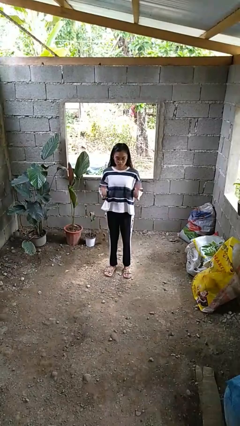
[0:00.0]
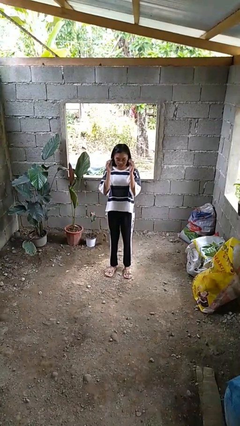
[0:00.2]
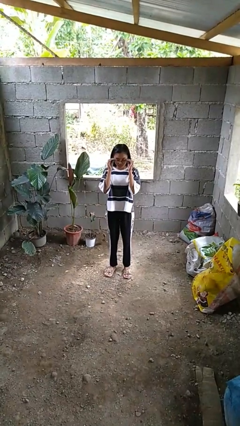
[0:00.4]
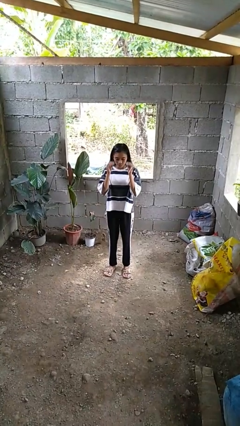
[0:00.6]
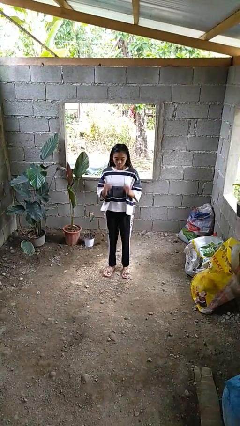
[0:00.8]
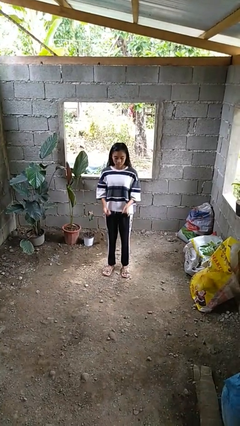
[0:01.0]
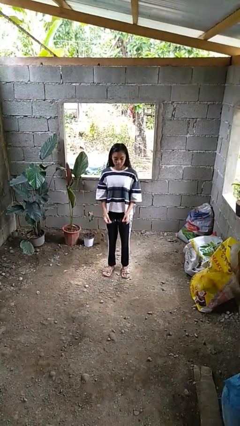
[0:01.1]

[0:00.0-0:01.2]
person takes off glasses

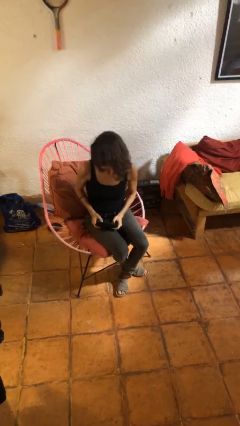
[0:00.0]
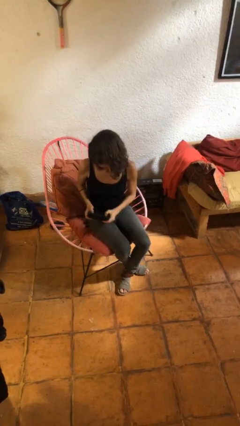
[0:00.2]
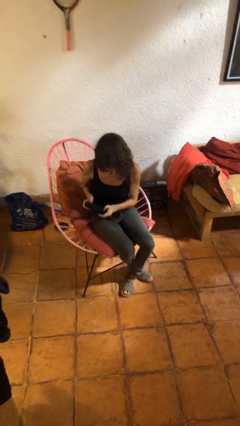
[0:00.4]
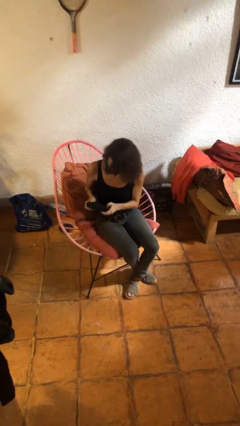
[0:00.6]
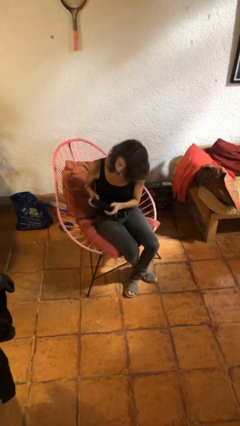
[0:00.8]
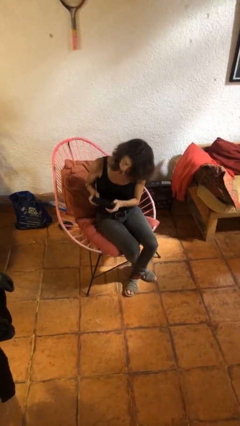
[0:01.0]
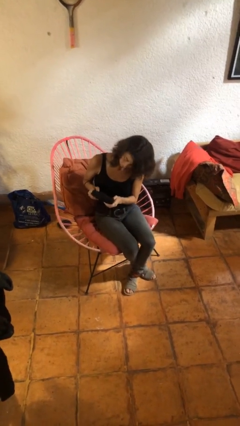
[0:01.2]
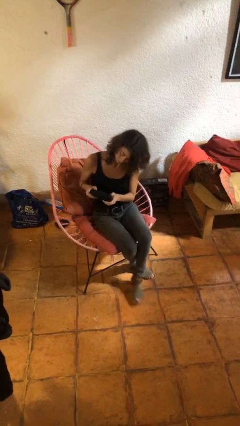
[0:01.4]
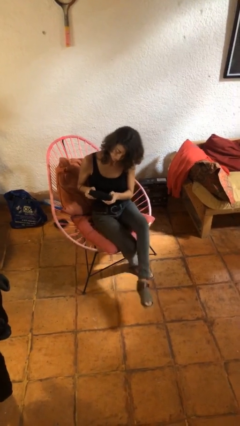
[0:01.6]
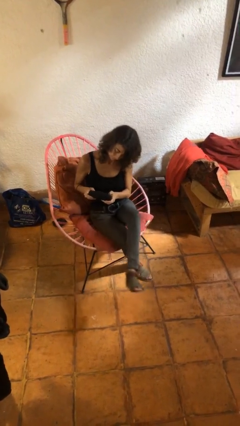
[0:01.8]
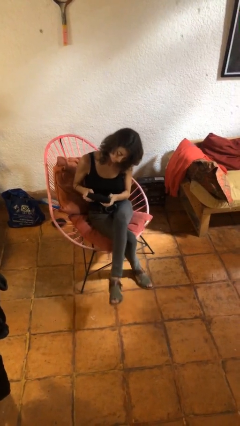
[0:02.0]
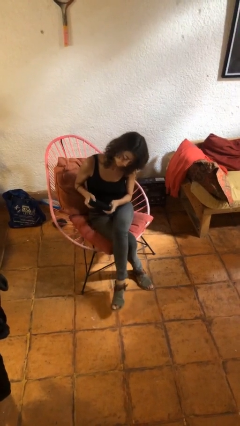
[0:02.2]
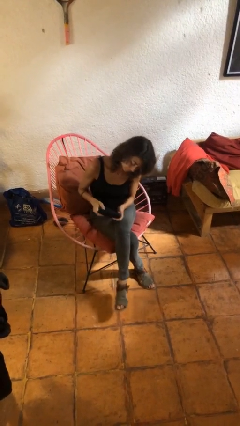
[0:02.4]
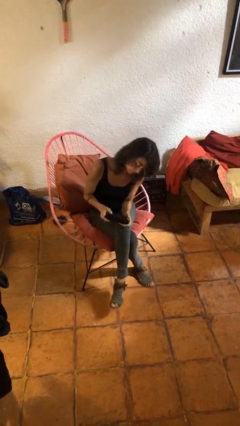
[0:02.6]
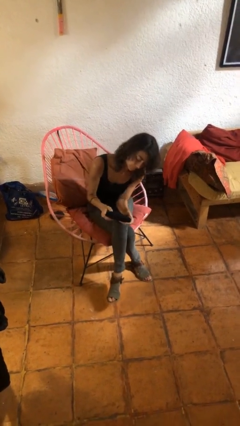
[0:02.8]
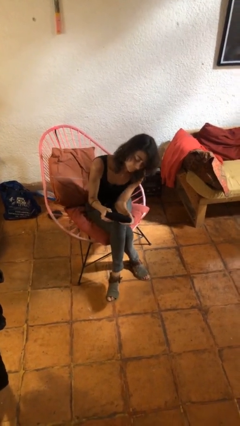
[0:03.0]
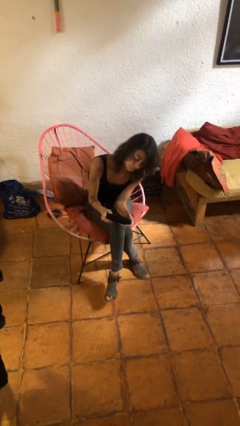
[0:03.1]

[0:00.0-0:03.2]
person interacts with handheld game

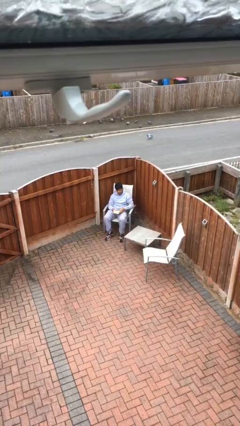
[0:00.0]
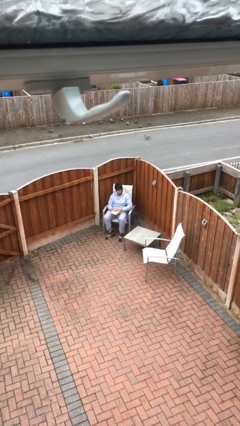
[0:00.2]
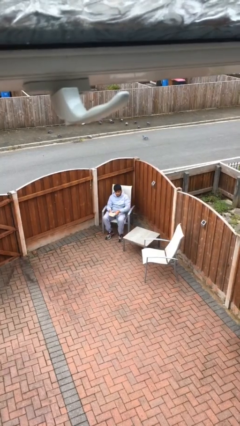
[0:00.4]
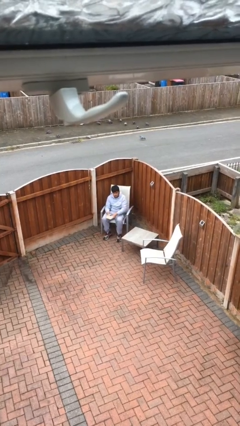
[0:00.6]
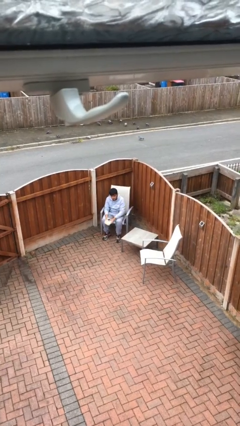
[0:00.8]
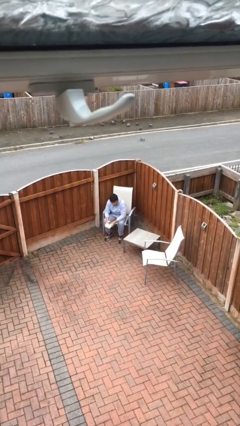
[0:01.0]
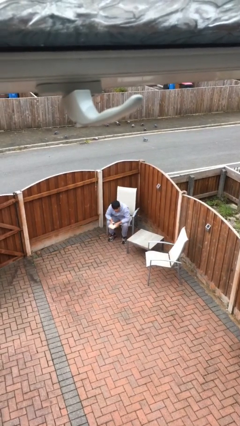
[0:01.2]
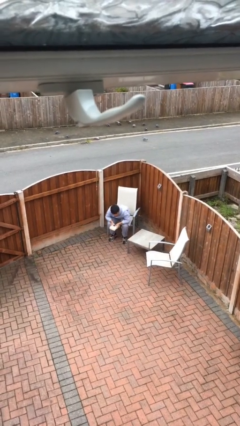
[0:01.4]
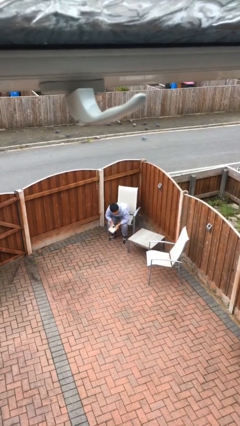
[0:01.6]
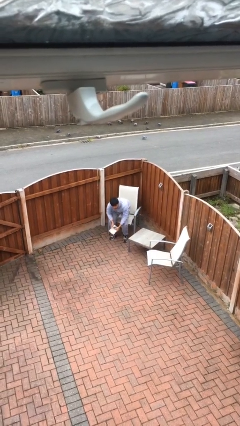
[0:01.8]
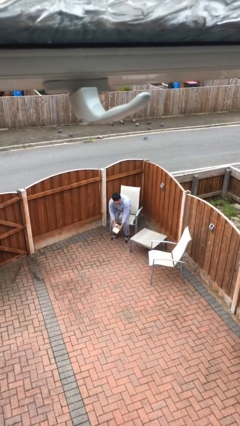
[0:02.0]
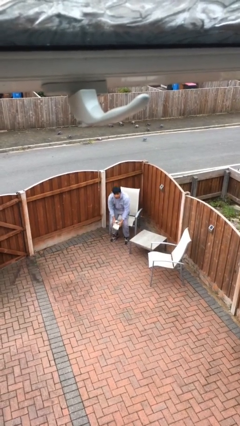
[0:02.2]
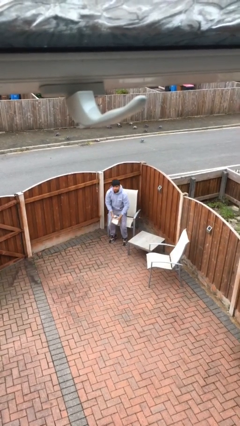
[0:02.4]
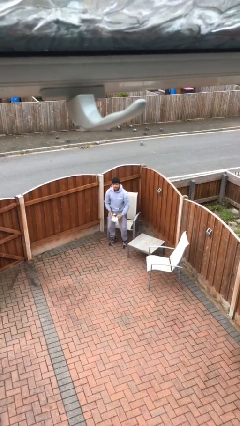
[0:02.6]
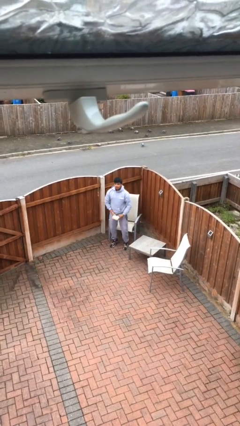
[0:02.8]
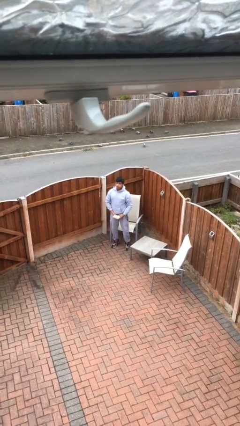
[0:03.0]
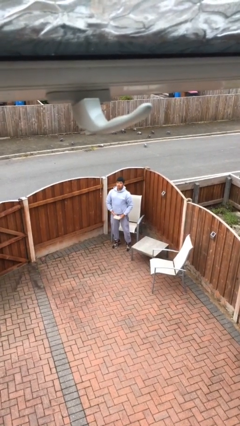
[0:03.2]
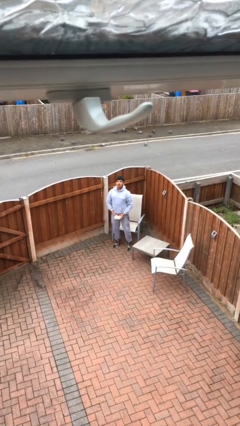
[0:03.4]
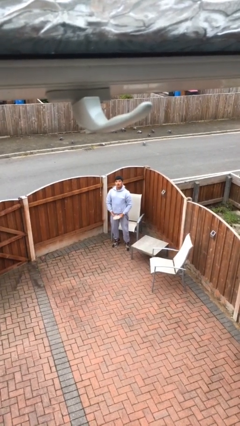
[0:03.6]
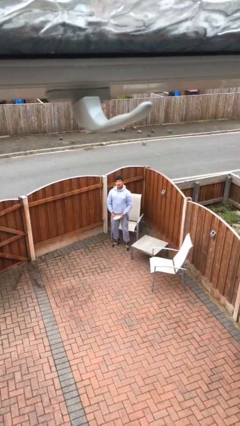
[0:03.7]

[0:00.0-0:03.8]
person stands up

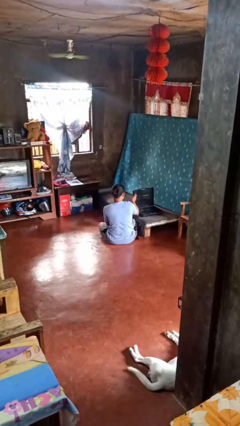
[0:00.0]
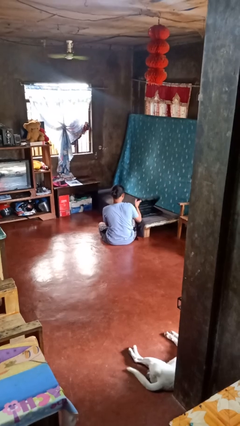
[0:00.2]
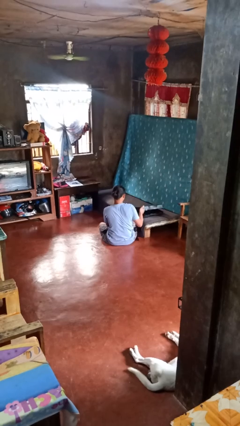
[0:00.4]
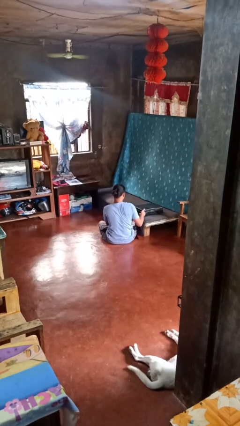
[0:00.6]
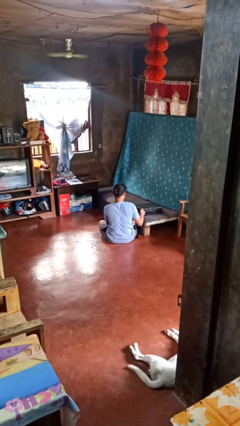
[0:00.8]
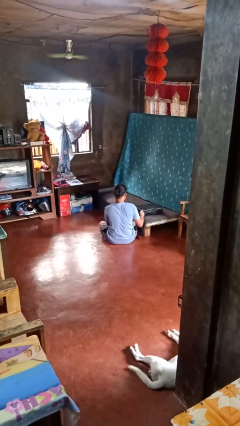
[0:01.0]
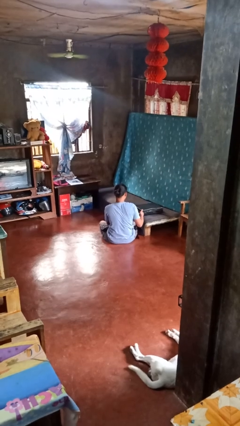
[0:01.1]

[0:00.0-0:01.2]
person closes suitcase

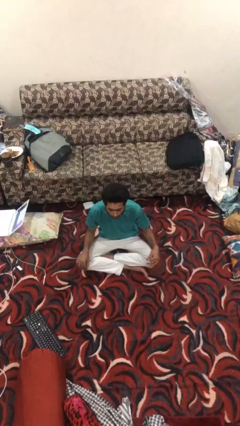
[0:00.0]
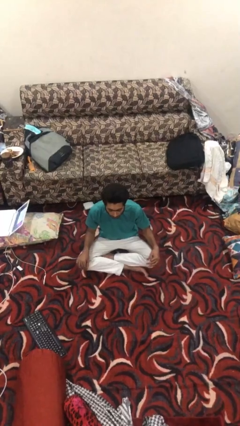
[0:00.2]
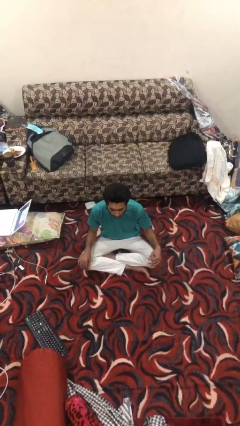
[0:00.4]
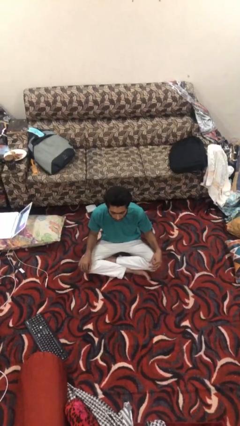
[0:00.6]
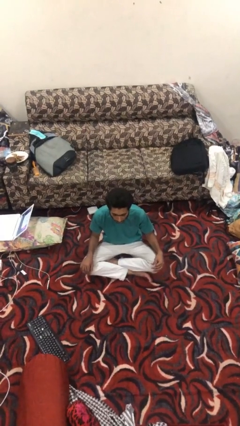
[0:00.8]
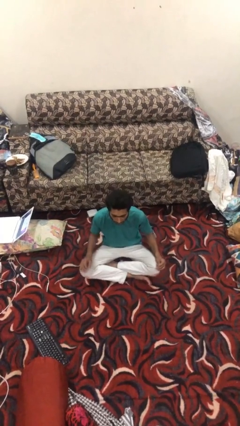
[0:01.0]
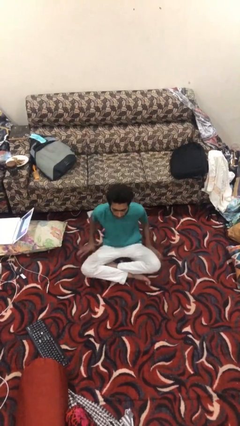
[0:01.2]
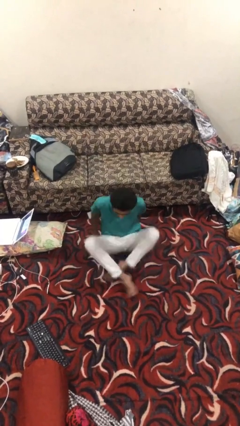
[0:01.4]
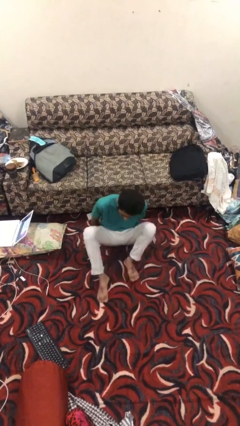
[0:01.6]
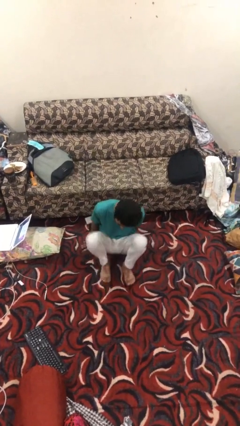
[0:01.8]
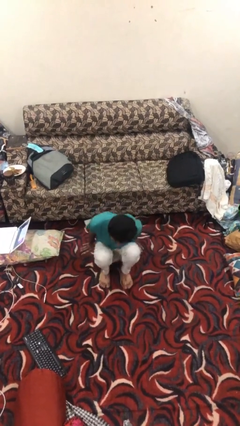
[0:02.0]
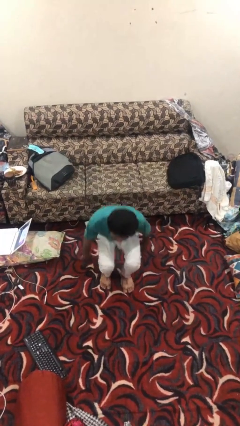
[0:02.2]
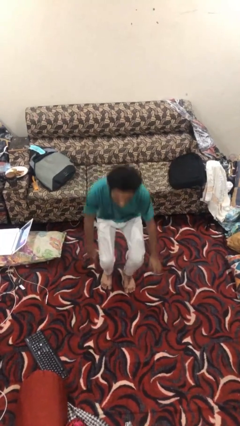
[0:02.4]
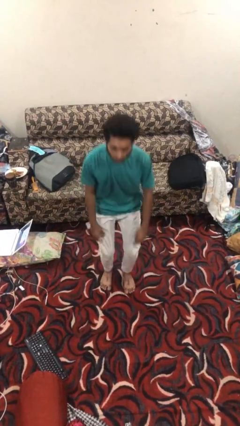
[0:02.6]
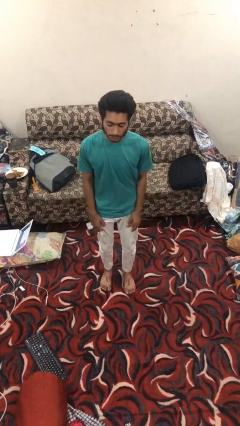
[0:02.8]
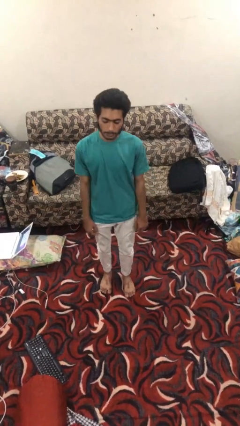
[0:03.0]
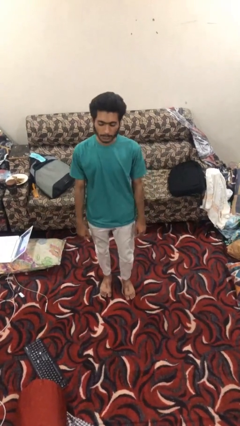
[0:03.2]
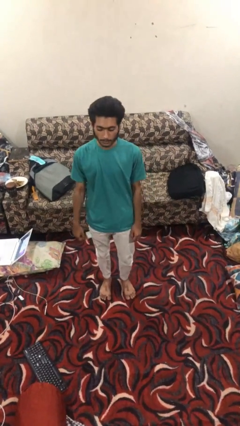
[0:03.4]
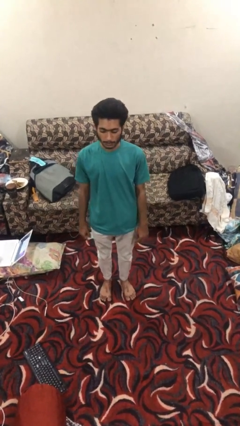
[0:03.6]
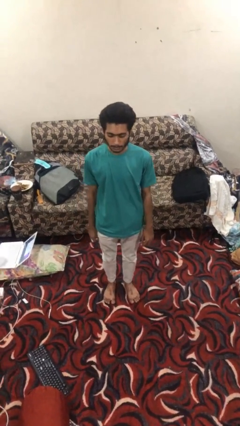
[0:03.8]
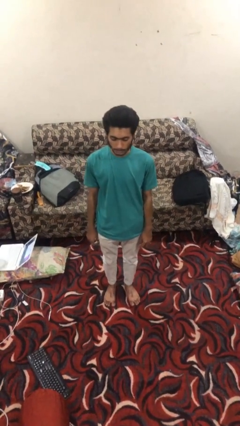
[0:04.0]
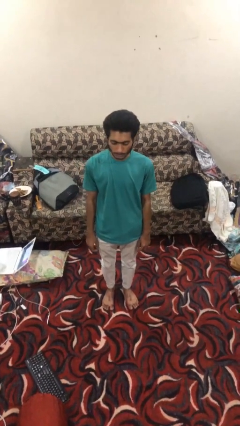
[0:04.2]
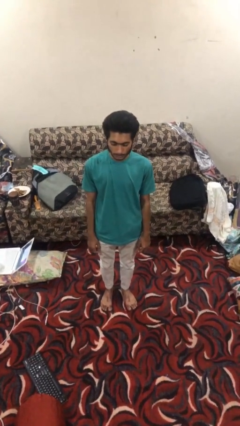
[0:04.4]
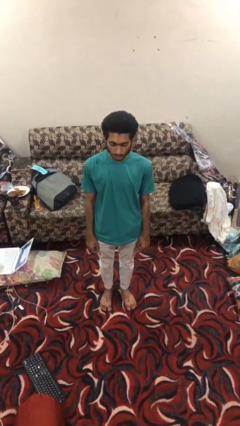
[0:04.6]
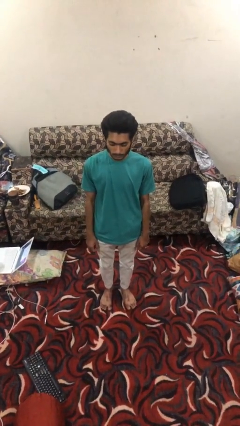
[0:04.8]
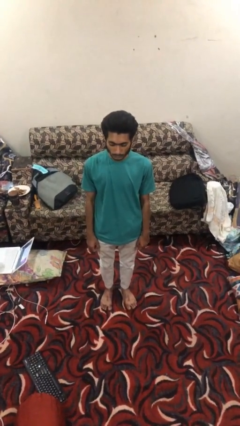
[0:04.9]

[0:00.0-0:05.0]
person stands up from floor

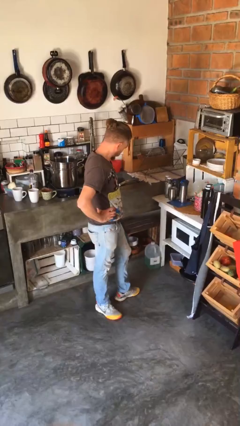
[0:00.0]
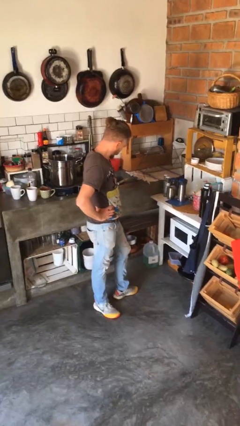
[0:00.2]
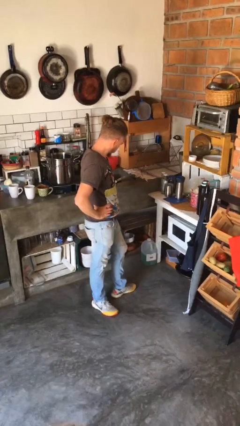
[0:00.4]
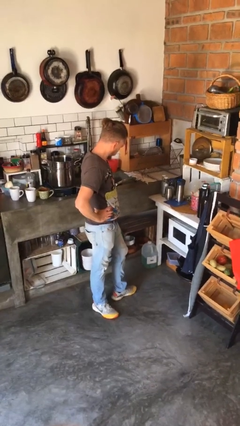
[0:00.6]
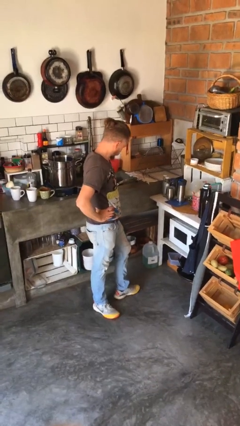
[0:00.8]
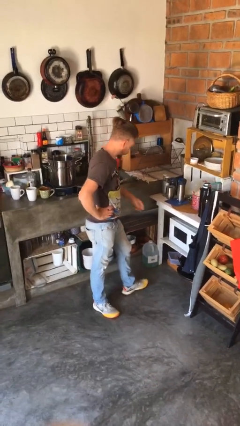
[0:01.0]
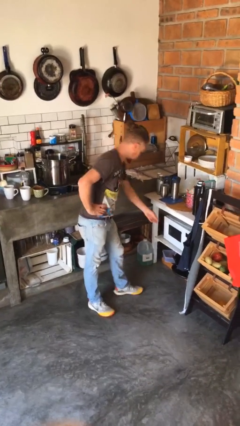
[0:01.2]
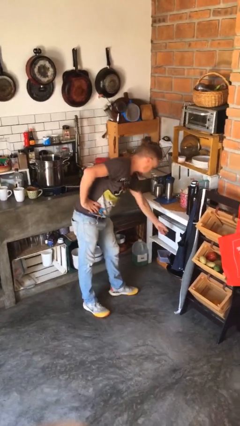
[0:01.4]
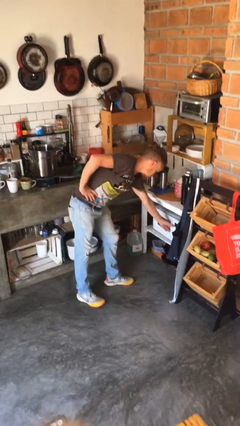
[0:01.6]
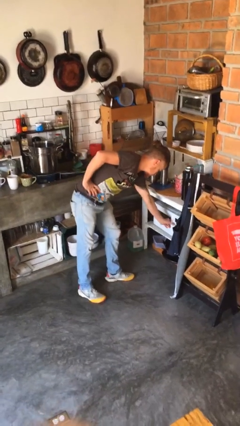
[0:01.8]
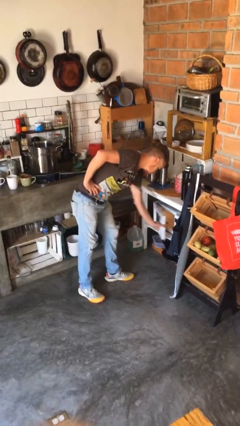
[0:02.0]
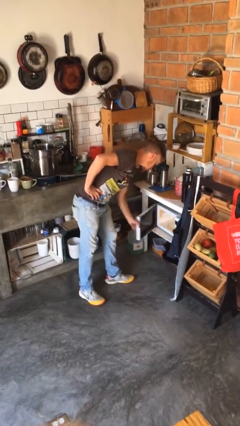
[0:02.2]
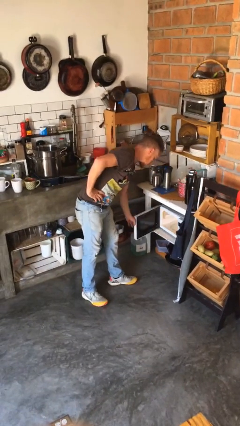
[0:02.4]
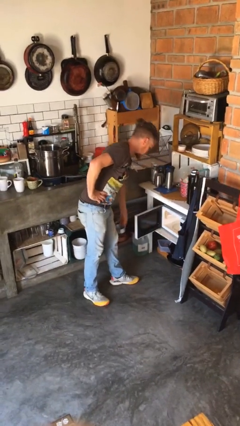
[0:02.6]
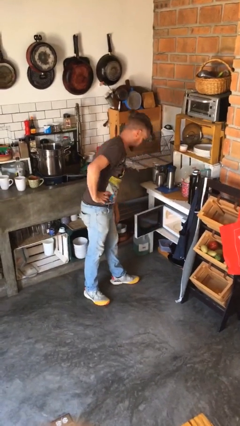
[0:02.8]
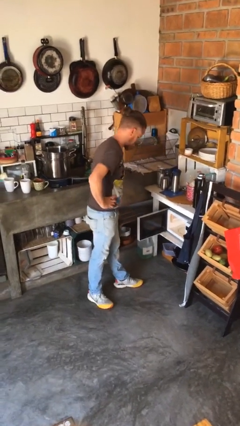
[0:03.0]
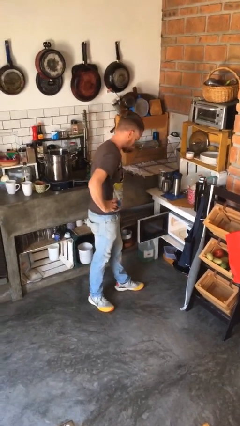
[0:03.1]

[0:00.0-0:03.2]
person opens microwave

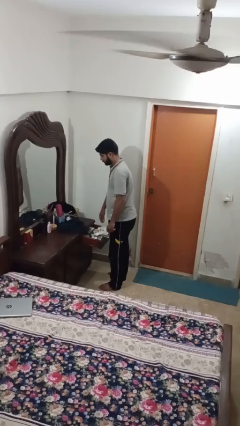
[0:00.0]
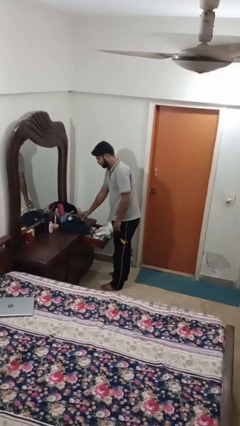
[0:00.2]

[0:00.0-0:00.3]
person puts clothes into dresser
